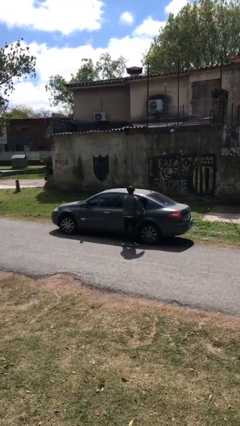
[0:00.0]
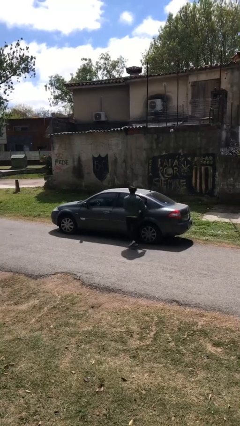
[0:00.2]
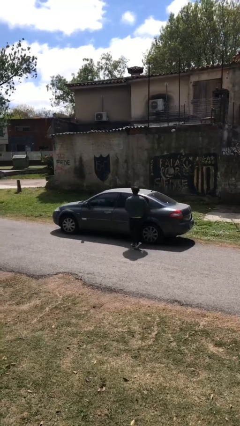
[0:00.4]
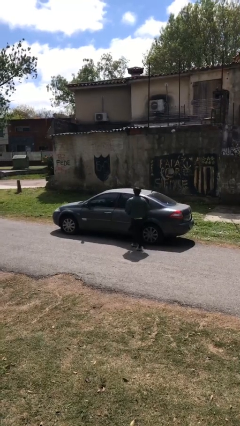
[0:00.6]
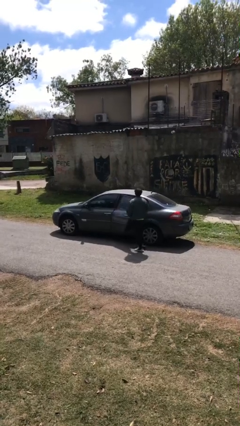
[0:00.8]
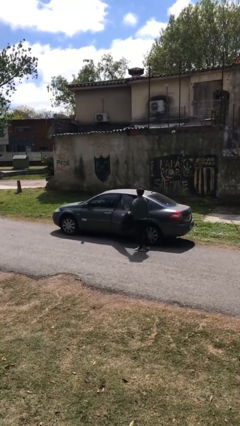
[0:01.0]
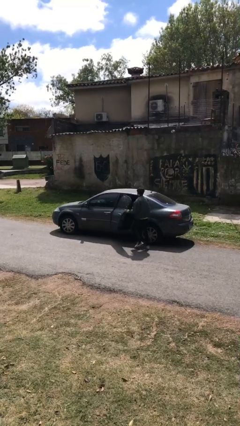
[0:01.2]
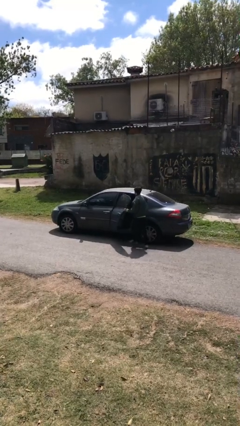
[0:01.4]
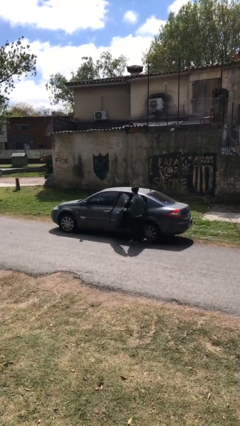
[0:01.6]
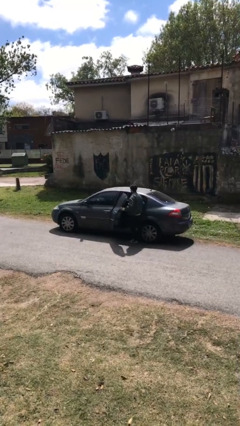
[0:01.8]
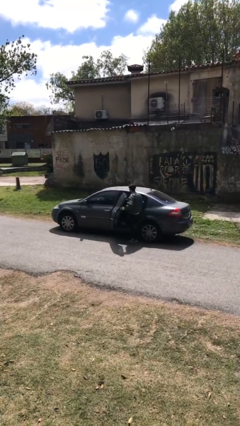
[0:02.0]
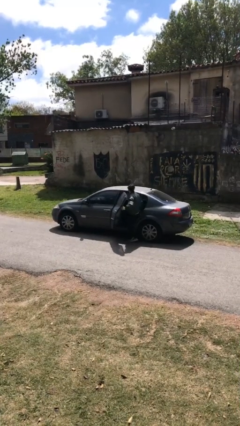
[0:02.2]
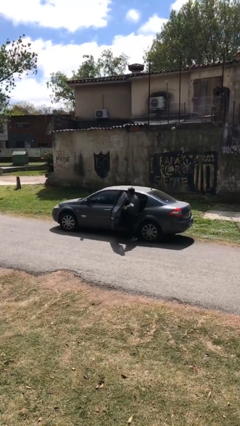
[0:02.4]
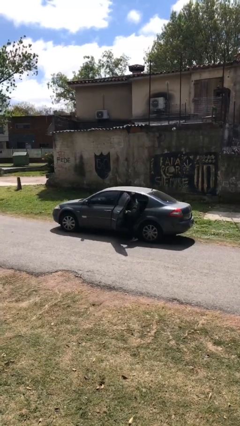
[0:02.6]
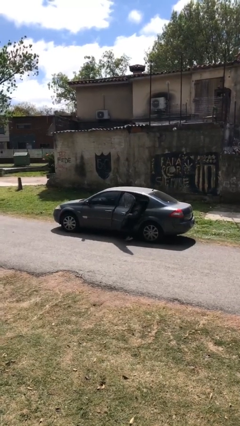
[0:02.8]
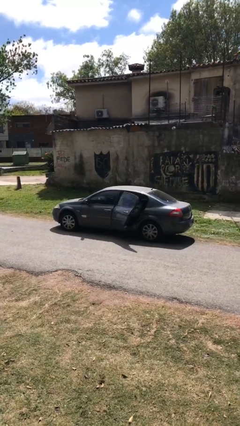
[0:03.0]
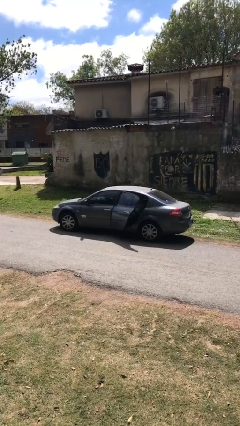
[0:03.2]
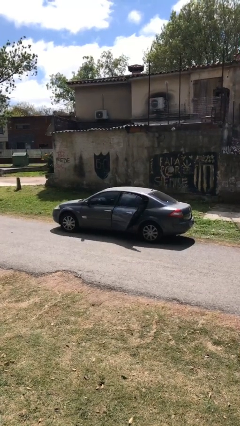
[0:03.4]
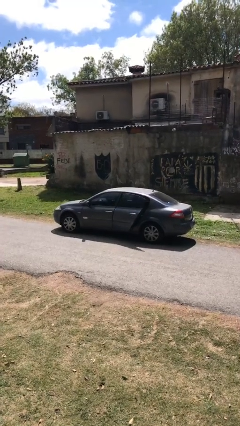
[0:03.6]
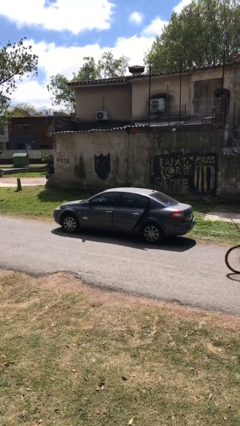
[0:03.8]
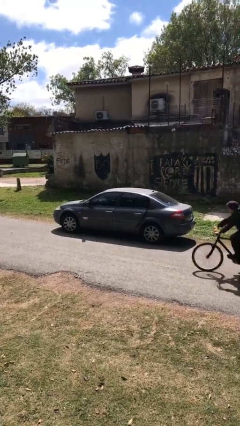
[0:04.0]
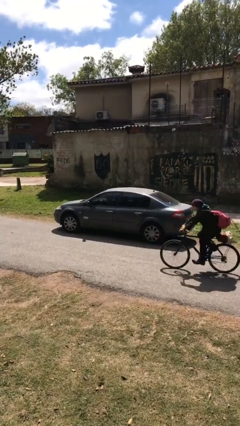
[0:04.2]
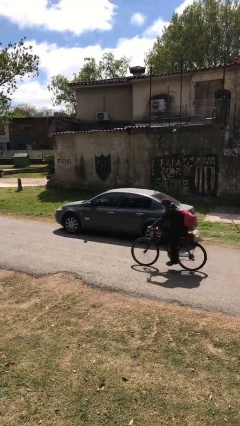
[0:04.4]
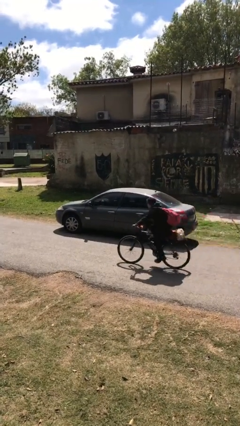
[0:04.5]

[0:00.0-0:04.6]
car picks up person

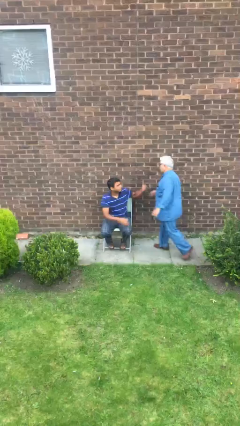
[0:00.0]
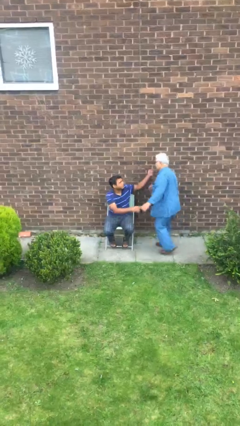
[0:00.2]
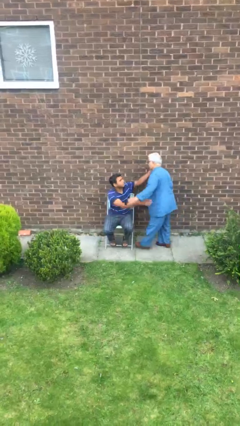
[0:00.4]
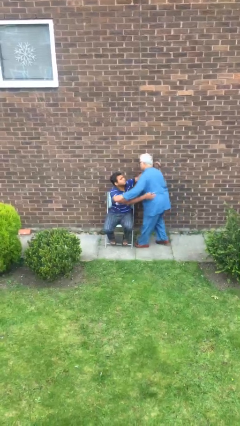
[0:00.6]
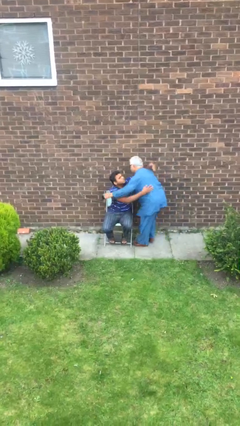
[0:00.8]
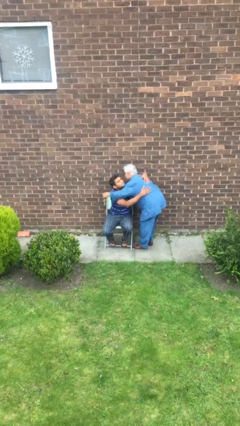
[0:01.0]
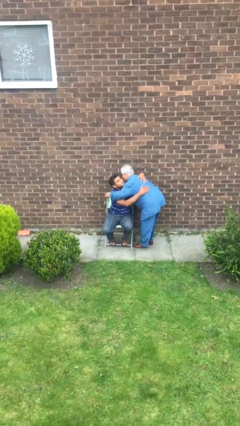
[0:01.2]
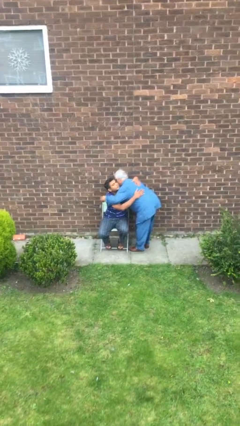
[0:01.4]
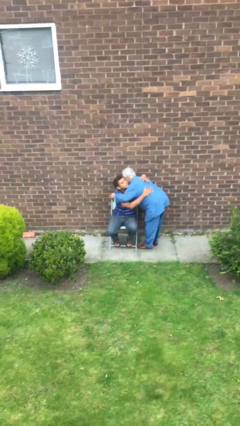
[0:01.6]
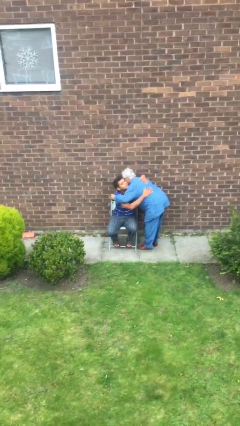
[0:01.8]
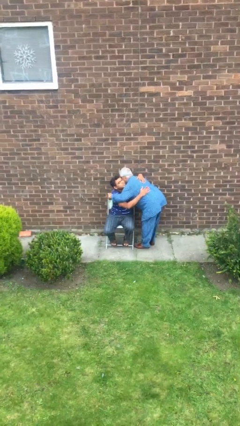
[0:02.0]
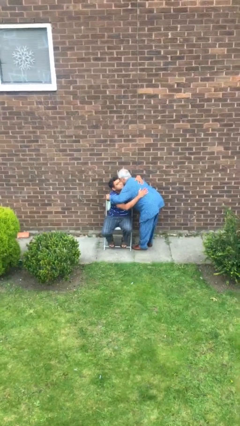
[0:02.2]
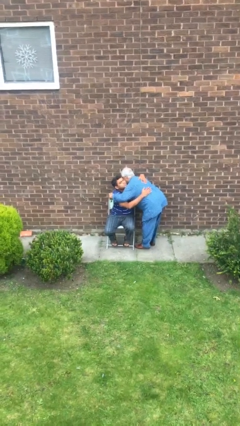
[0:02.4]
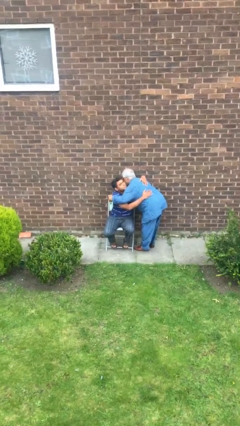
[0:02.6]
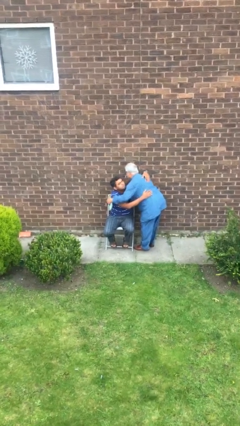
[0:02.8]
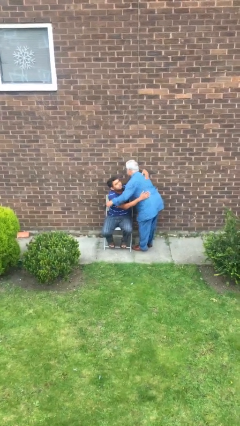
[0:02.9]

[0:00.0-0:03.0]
person embraces person

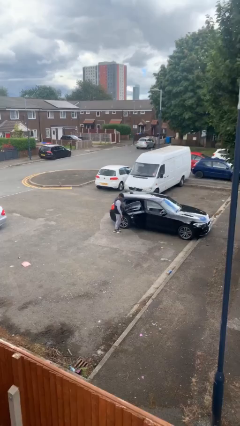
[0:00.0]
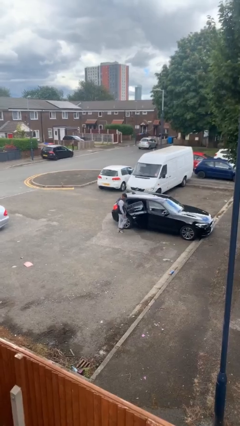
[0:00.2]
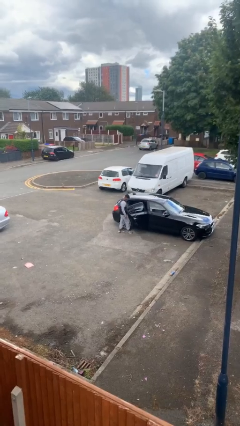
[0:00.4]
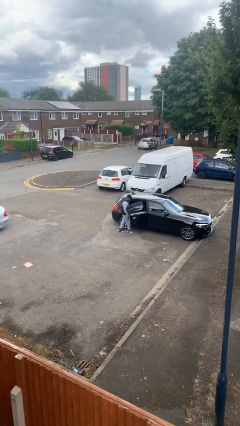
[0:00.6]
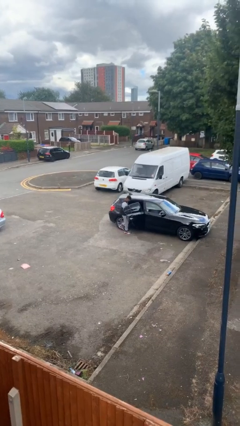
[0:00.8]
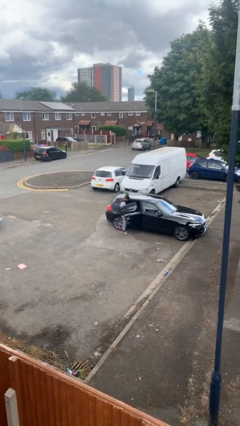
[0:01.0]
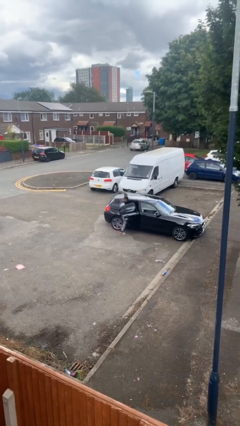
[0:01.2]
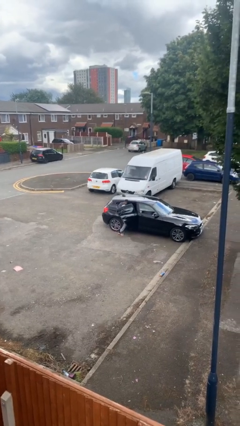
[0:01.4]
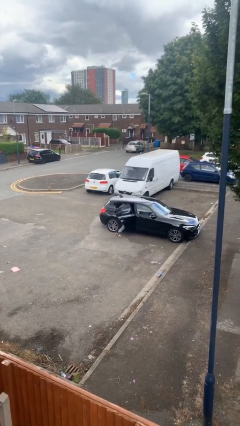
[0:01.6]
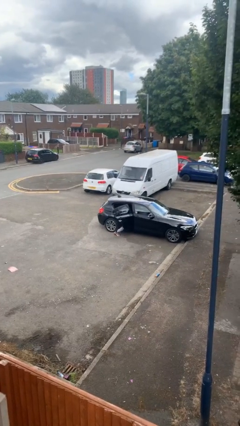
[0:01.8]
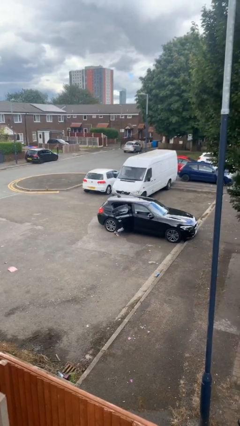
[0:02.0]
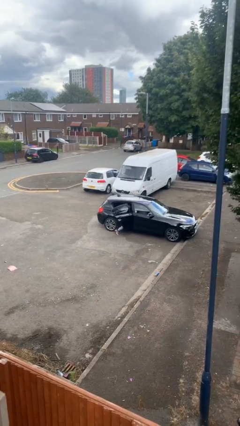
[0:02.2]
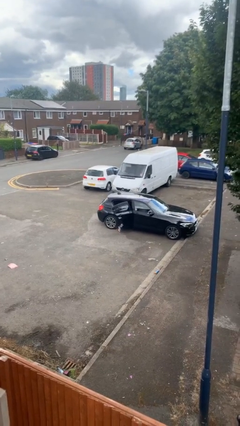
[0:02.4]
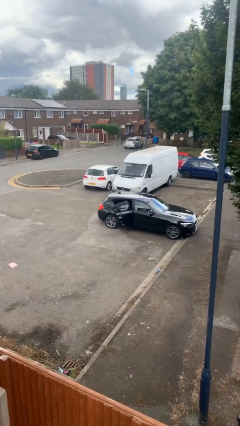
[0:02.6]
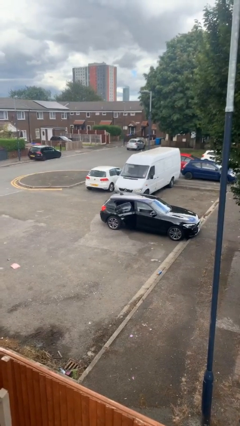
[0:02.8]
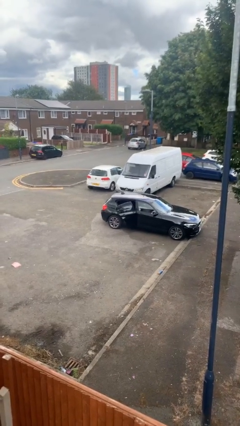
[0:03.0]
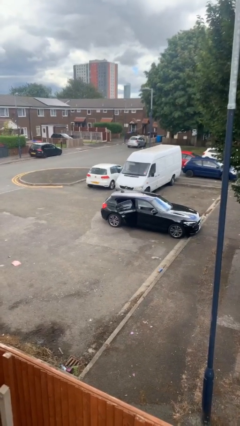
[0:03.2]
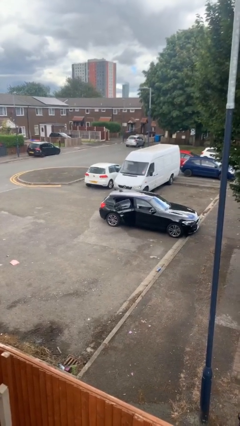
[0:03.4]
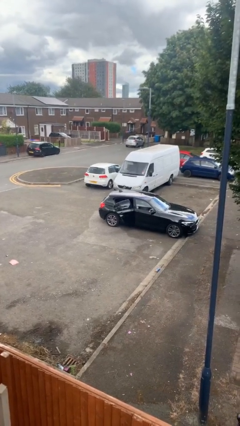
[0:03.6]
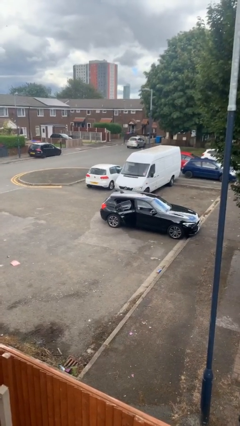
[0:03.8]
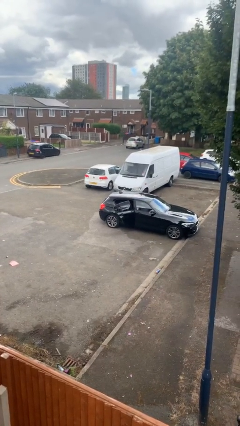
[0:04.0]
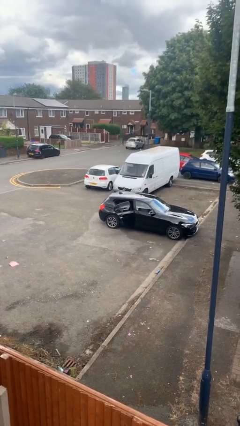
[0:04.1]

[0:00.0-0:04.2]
person enters car

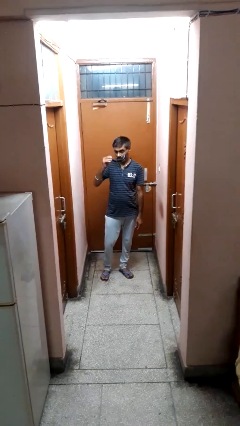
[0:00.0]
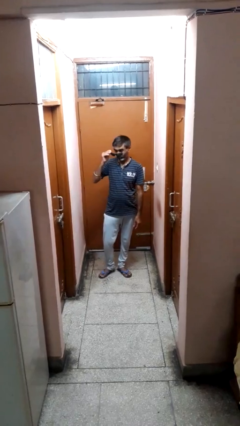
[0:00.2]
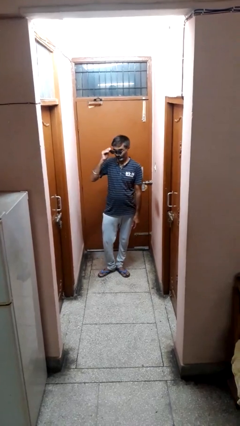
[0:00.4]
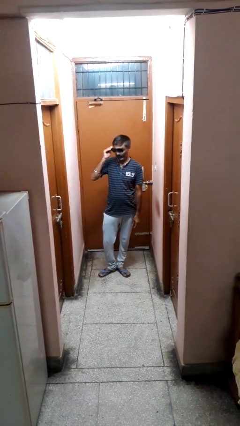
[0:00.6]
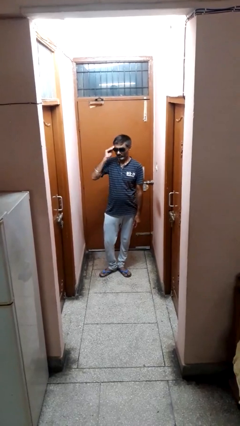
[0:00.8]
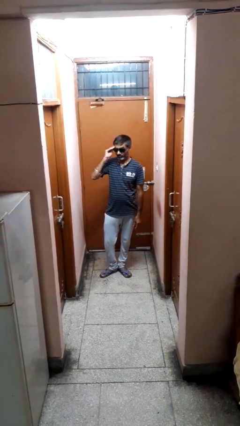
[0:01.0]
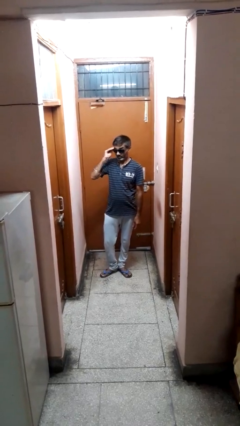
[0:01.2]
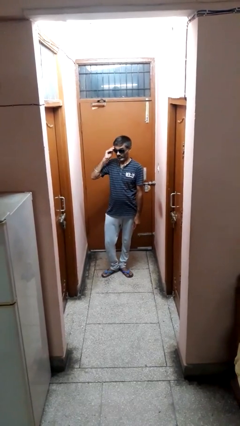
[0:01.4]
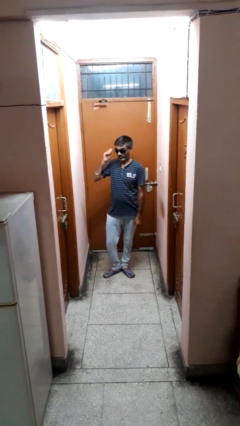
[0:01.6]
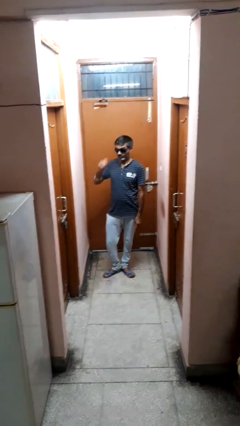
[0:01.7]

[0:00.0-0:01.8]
person puts on sunglasses

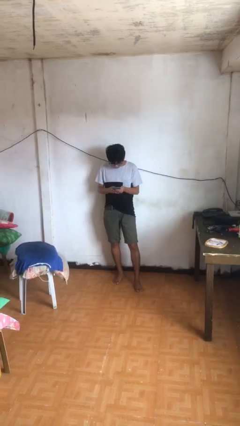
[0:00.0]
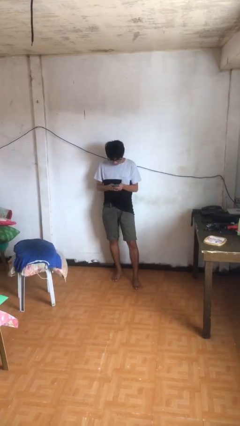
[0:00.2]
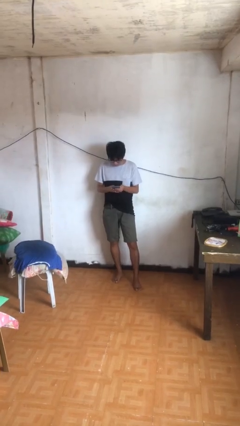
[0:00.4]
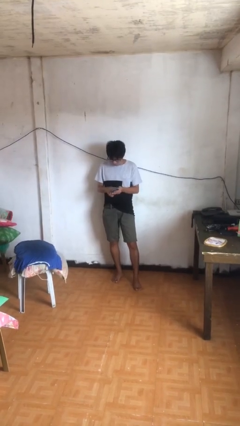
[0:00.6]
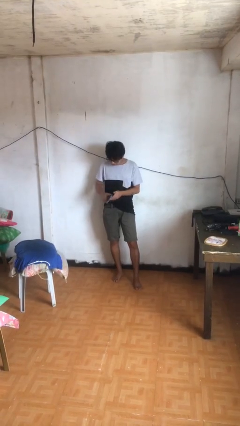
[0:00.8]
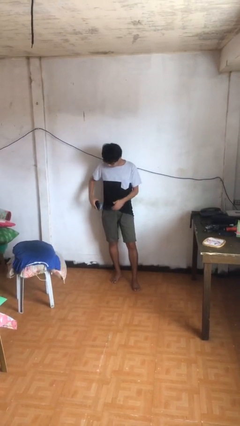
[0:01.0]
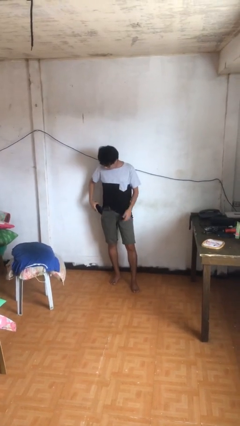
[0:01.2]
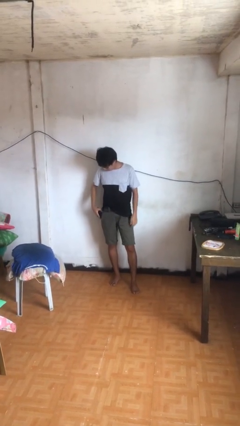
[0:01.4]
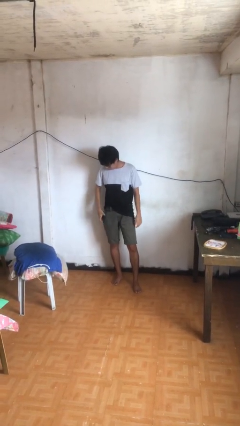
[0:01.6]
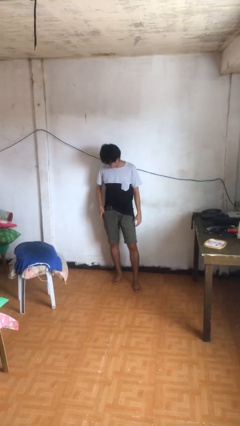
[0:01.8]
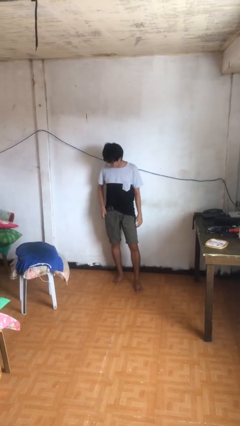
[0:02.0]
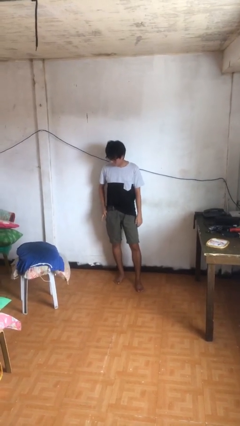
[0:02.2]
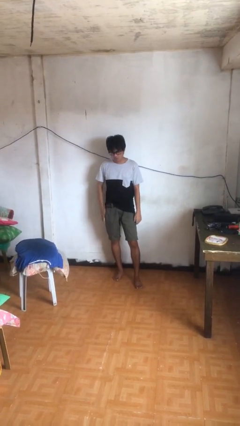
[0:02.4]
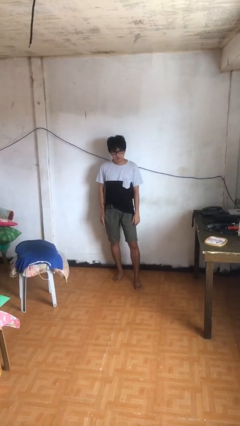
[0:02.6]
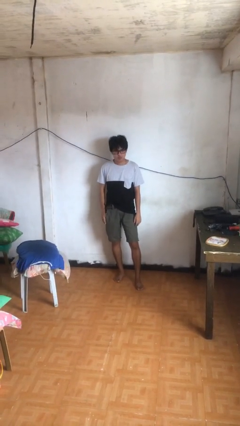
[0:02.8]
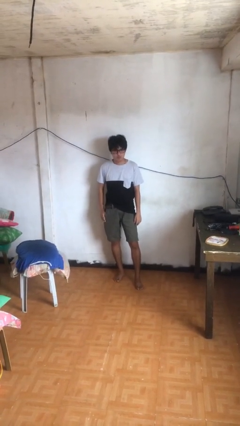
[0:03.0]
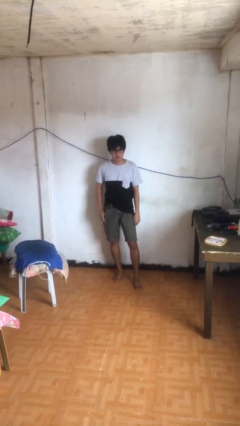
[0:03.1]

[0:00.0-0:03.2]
person puts phone into pocket

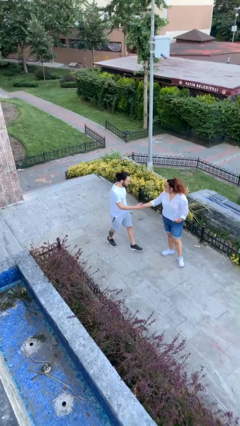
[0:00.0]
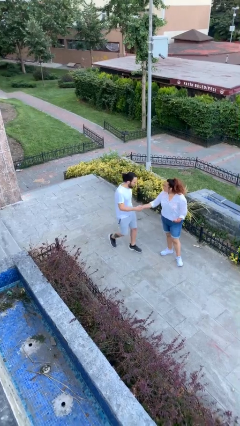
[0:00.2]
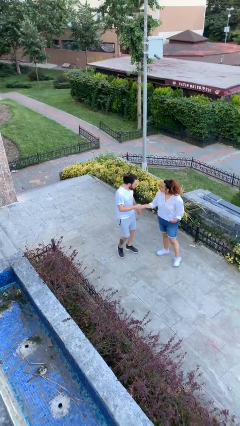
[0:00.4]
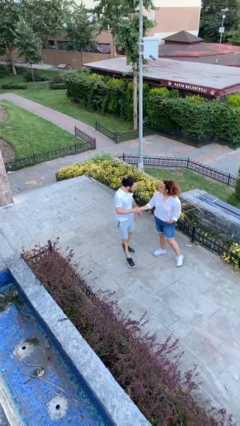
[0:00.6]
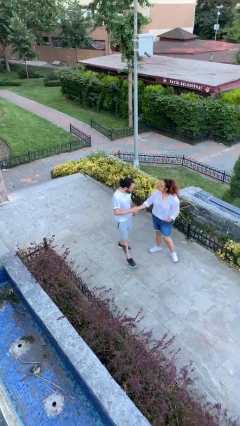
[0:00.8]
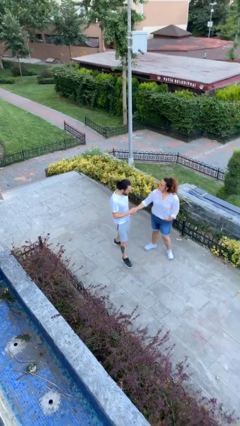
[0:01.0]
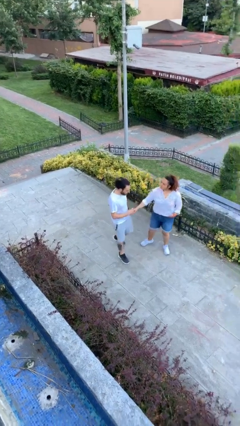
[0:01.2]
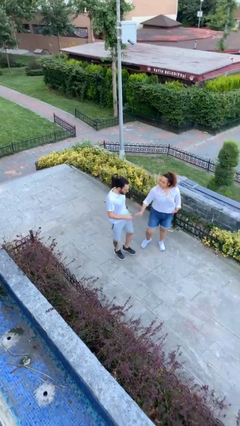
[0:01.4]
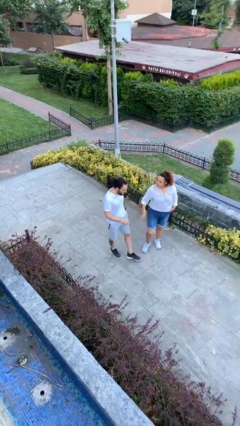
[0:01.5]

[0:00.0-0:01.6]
person shakes hand
